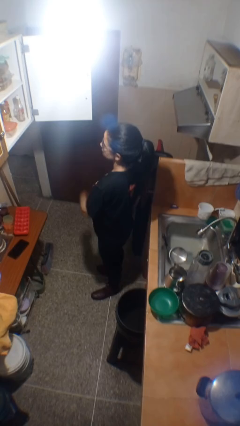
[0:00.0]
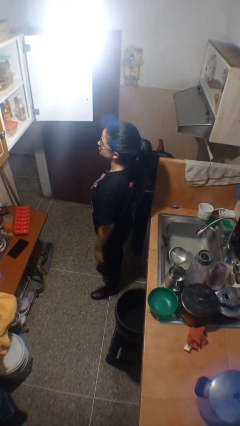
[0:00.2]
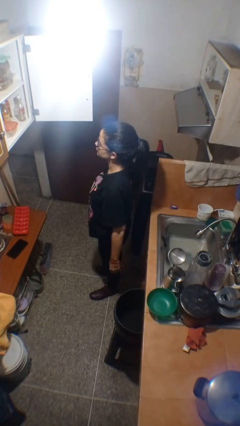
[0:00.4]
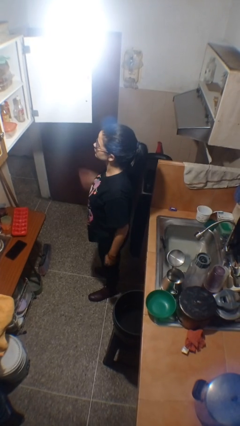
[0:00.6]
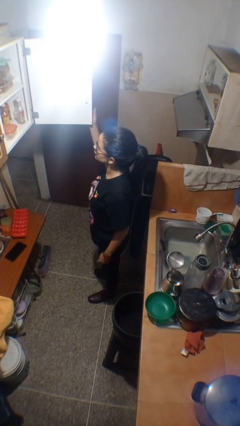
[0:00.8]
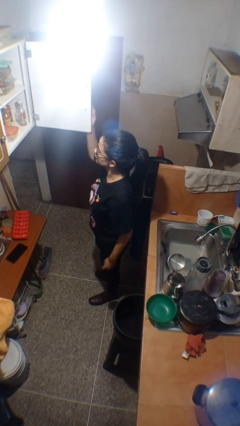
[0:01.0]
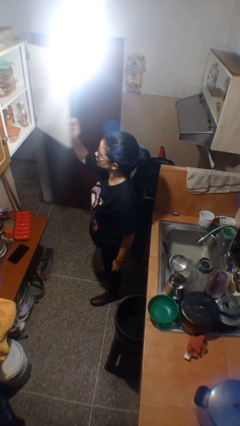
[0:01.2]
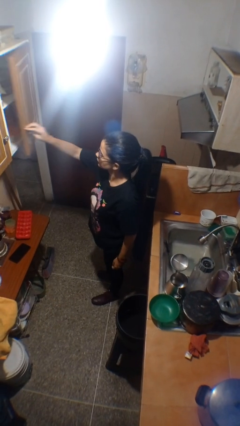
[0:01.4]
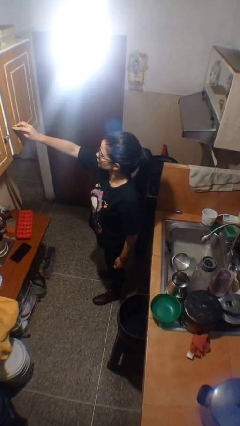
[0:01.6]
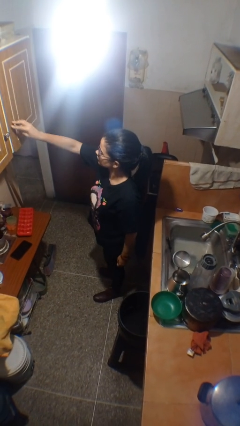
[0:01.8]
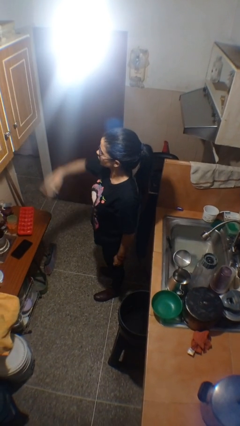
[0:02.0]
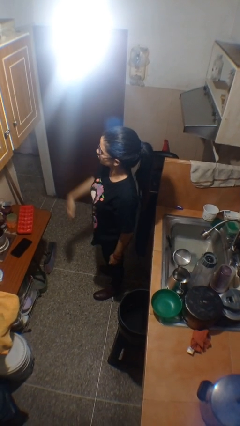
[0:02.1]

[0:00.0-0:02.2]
person closes cabinet

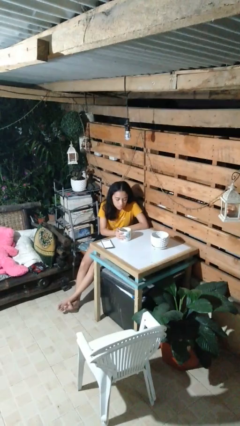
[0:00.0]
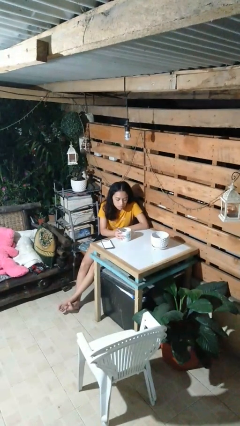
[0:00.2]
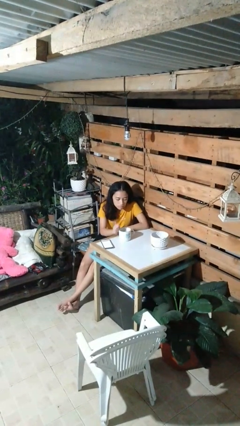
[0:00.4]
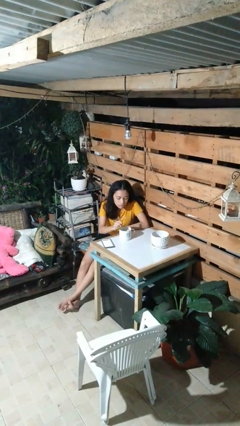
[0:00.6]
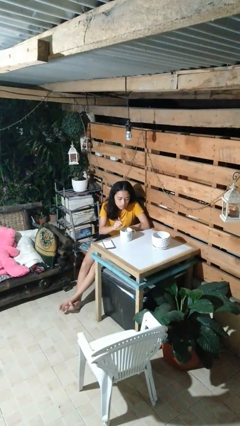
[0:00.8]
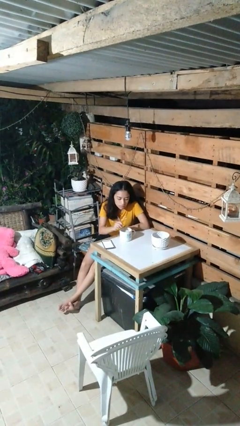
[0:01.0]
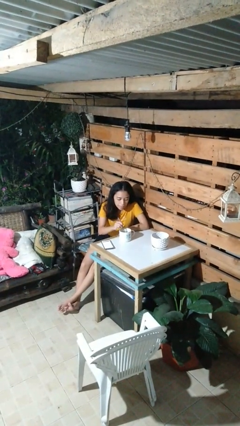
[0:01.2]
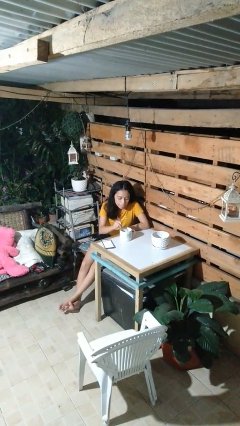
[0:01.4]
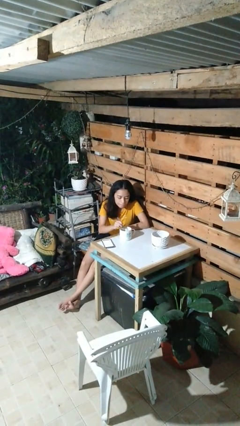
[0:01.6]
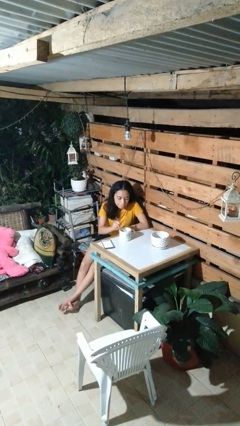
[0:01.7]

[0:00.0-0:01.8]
person stirs mug

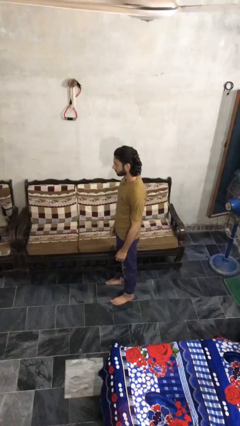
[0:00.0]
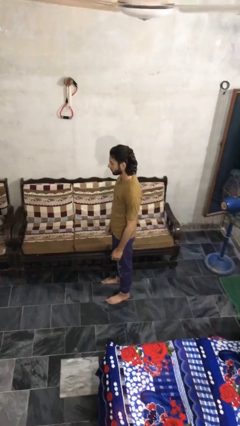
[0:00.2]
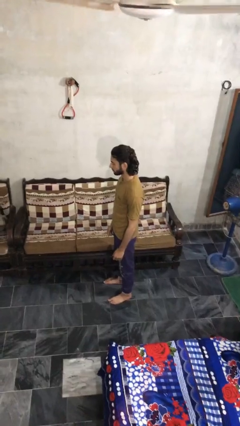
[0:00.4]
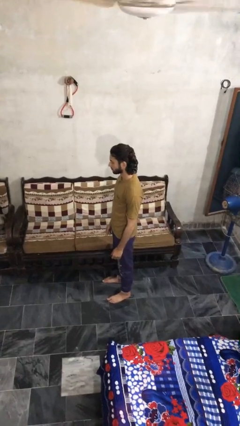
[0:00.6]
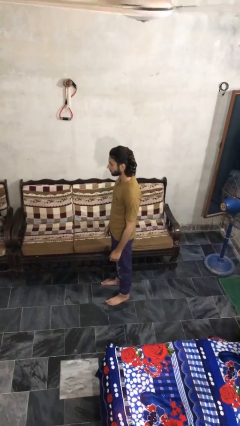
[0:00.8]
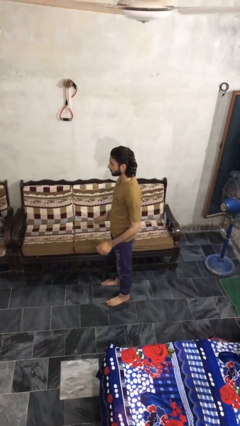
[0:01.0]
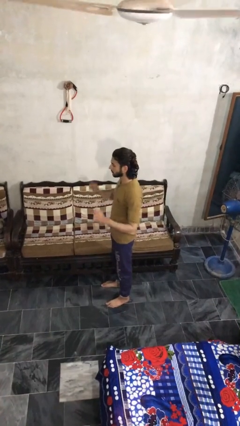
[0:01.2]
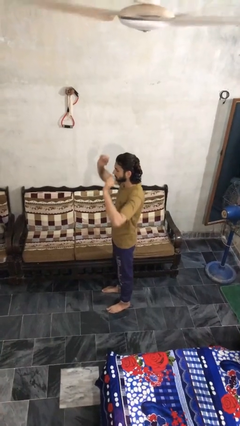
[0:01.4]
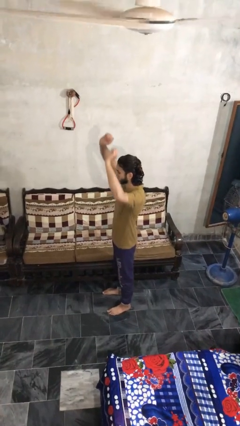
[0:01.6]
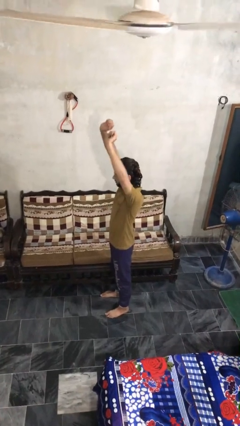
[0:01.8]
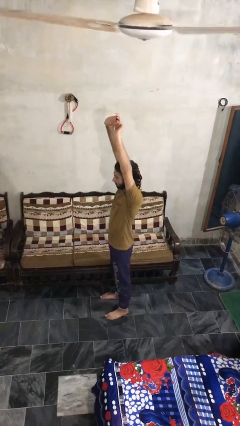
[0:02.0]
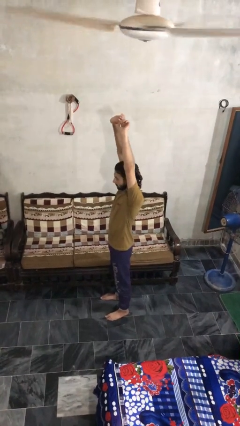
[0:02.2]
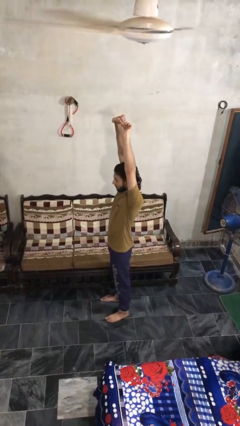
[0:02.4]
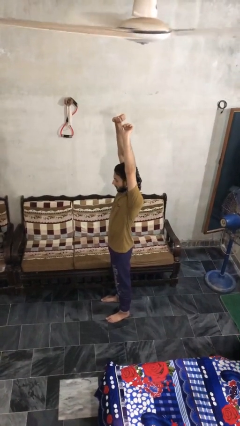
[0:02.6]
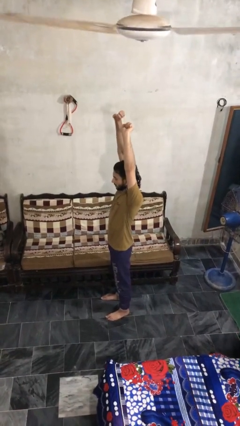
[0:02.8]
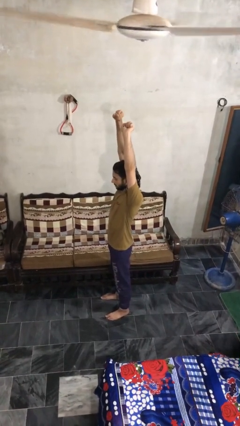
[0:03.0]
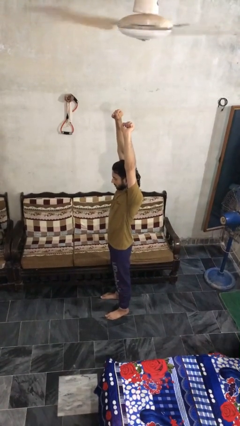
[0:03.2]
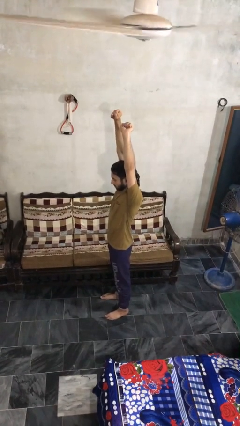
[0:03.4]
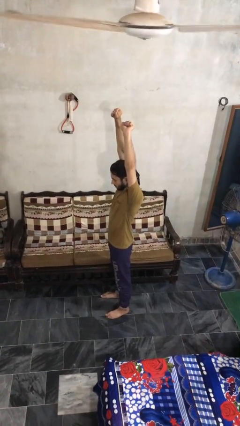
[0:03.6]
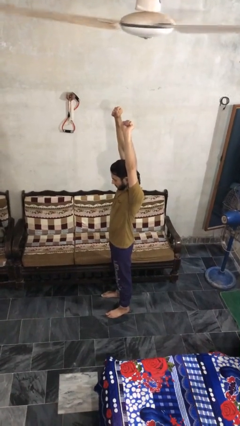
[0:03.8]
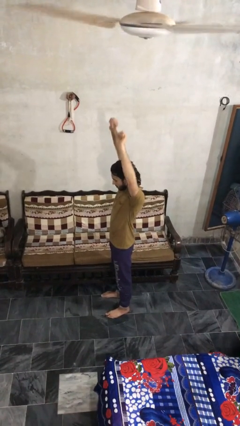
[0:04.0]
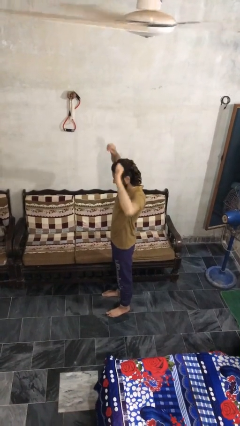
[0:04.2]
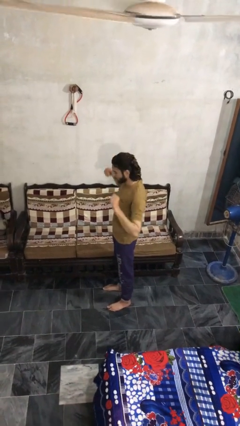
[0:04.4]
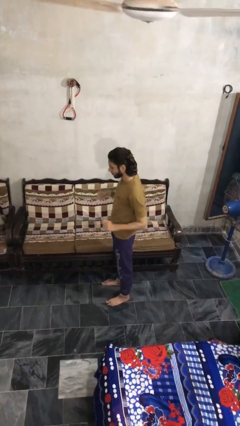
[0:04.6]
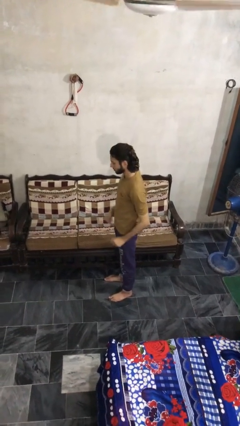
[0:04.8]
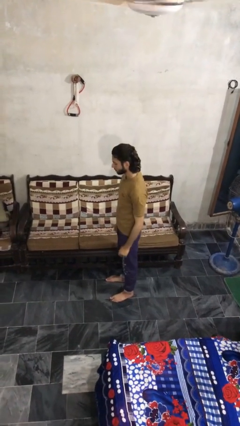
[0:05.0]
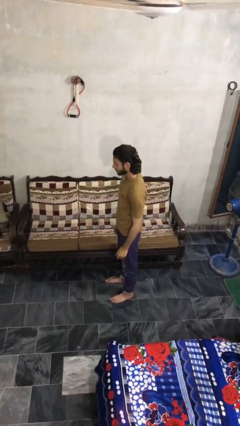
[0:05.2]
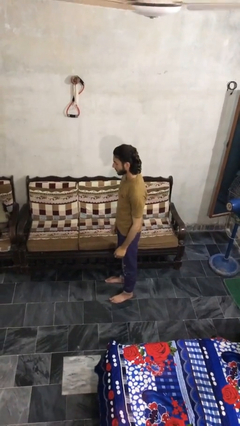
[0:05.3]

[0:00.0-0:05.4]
person stretches arms over head

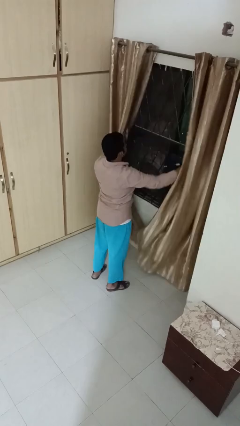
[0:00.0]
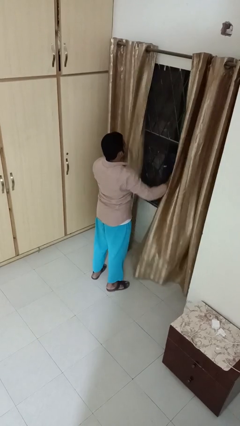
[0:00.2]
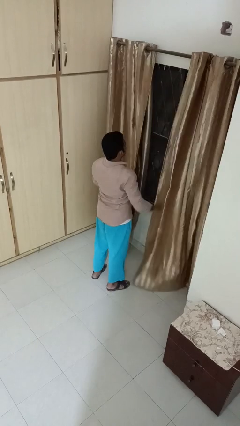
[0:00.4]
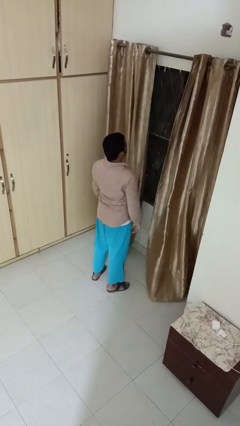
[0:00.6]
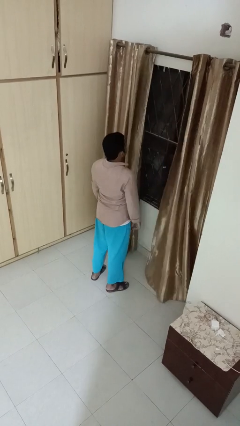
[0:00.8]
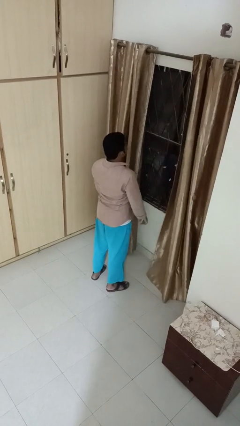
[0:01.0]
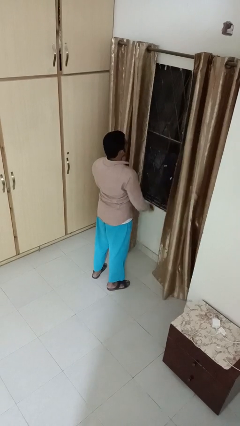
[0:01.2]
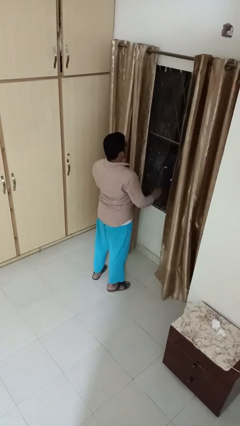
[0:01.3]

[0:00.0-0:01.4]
person opens curtains

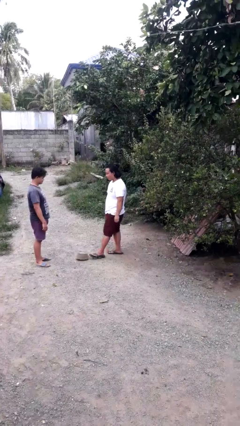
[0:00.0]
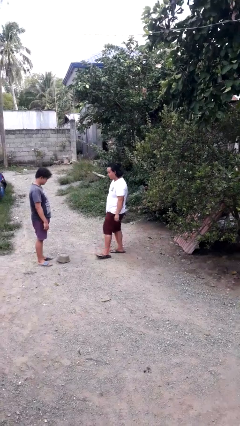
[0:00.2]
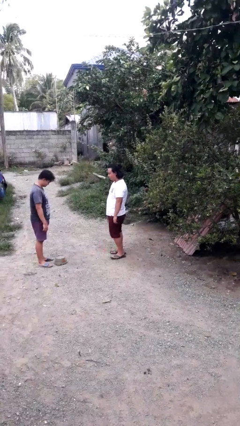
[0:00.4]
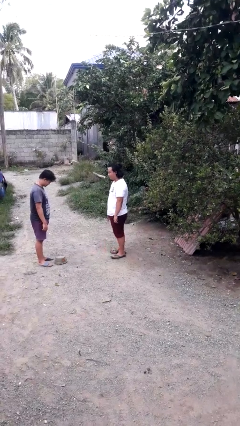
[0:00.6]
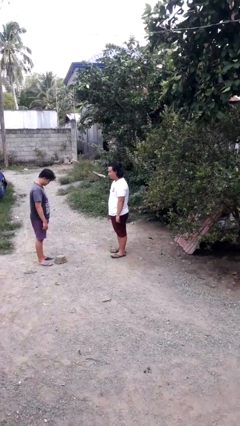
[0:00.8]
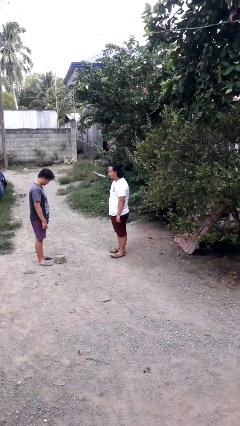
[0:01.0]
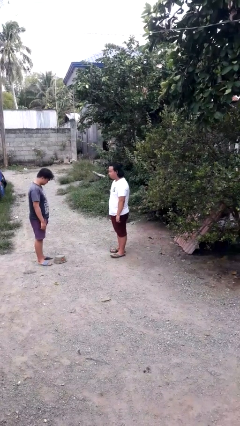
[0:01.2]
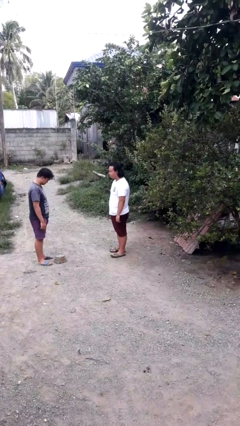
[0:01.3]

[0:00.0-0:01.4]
person kicks object to person

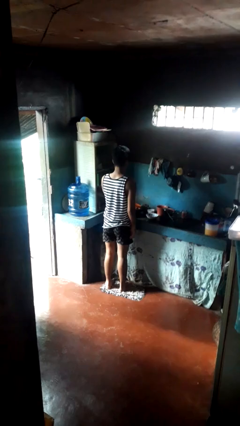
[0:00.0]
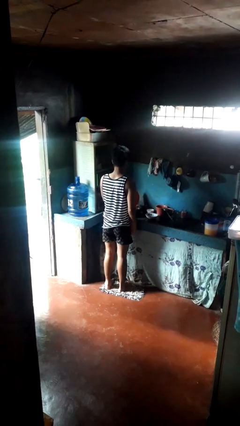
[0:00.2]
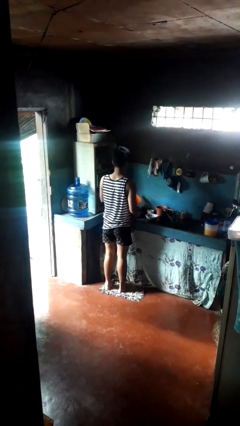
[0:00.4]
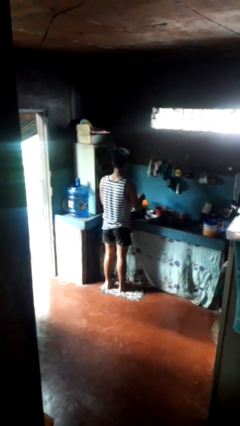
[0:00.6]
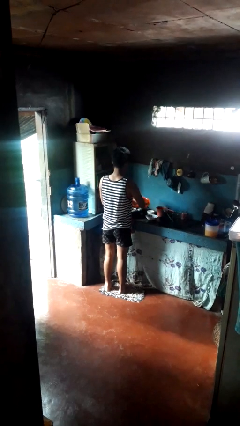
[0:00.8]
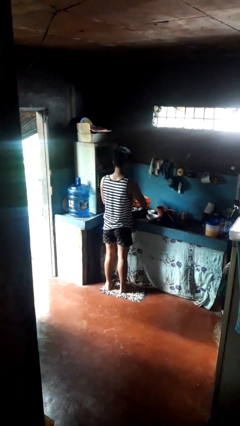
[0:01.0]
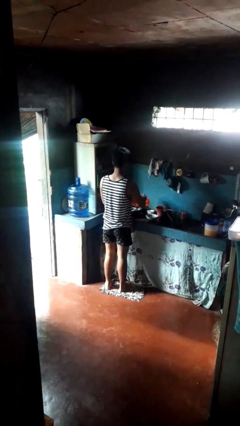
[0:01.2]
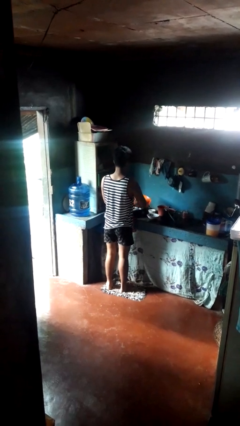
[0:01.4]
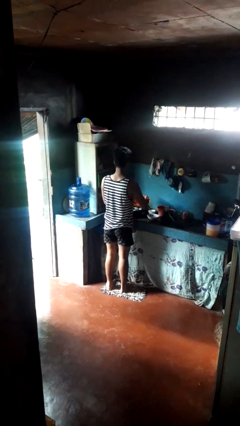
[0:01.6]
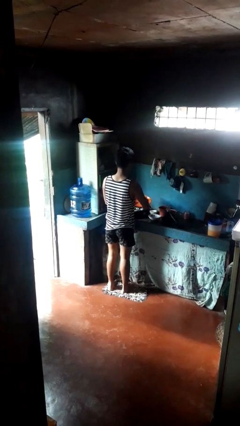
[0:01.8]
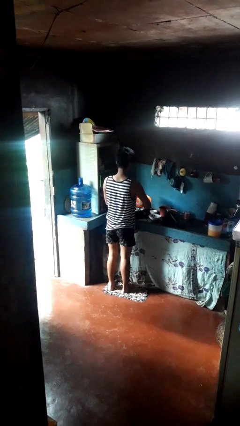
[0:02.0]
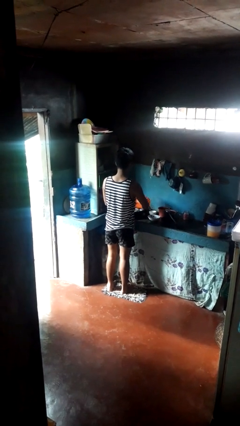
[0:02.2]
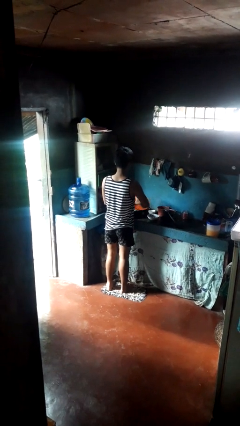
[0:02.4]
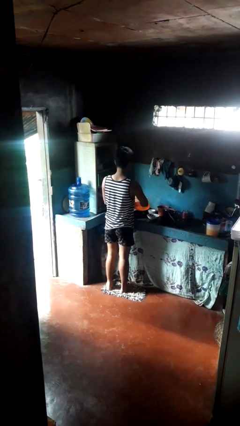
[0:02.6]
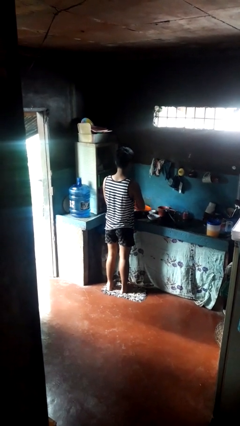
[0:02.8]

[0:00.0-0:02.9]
person washes dish

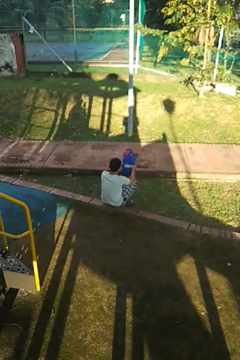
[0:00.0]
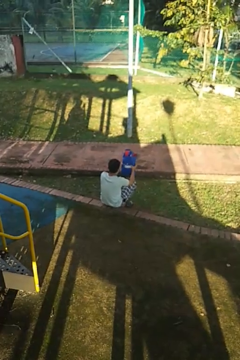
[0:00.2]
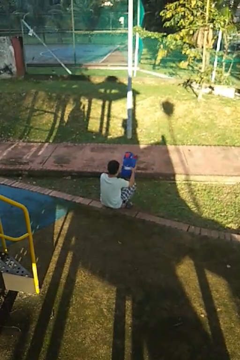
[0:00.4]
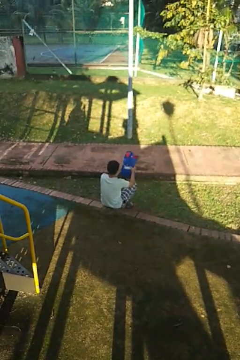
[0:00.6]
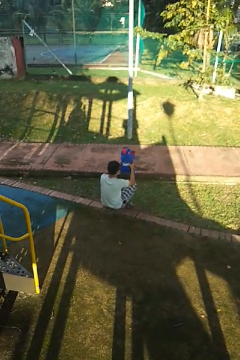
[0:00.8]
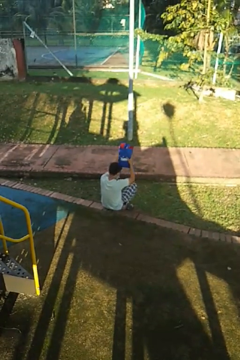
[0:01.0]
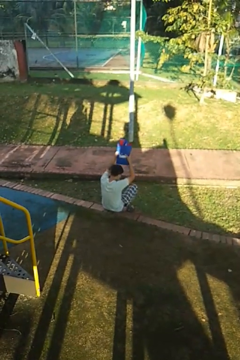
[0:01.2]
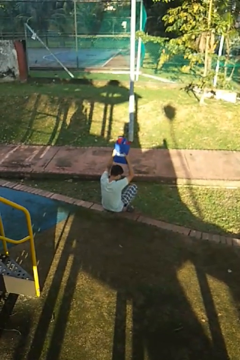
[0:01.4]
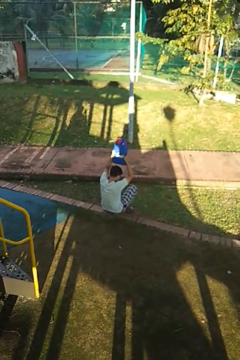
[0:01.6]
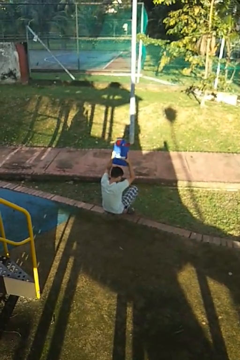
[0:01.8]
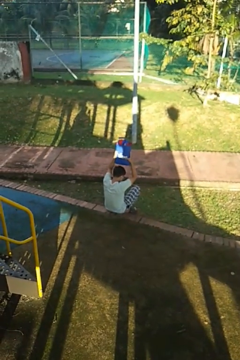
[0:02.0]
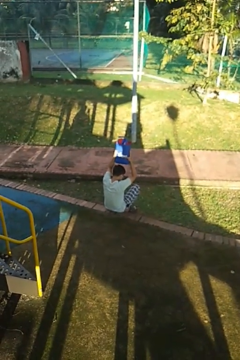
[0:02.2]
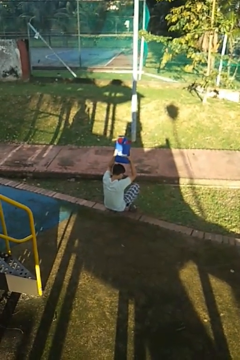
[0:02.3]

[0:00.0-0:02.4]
person holds object above head

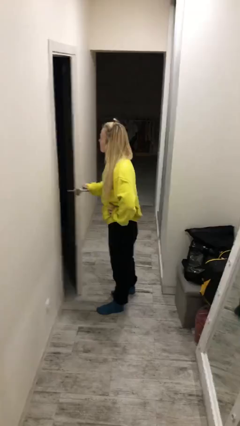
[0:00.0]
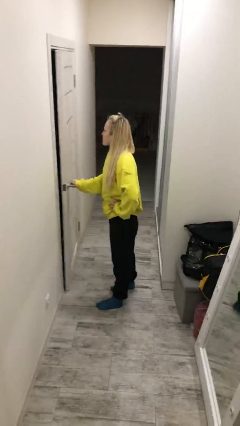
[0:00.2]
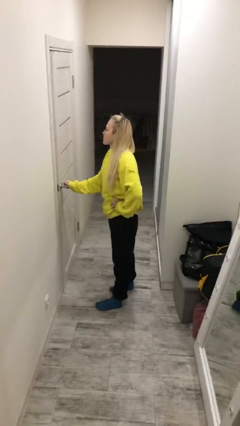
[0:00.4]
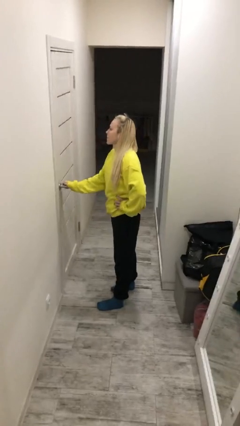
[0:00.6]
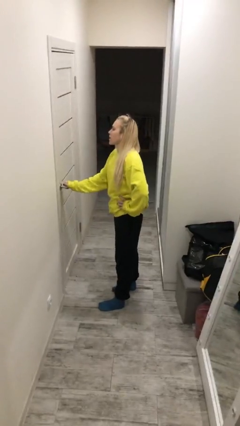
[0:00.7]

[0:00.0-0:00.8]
person closes facility door
